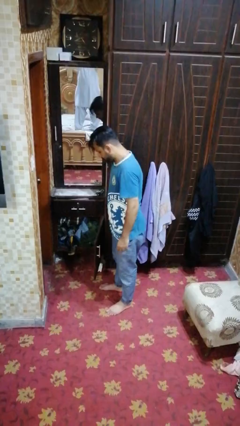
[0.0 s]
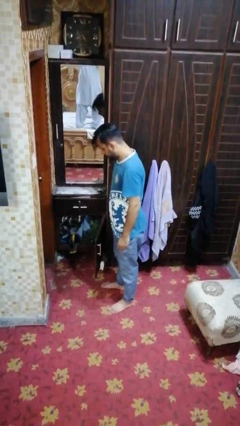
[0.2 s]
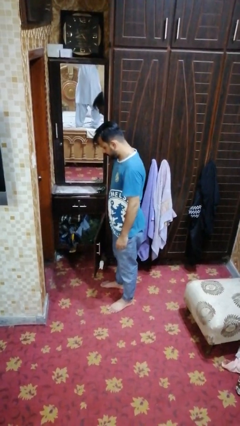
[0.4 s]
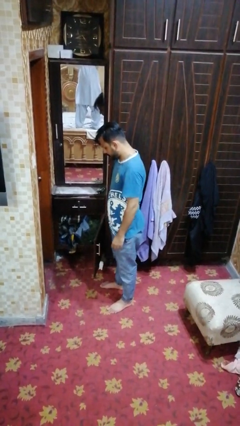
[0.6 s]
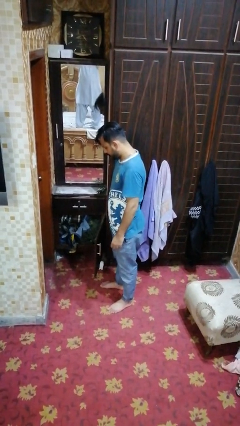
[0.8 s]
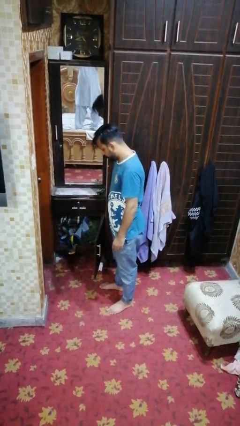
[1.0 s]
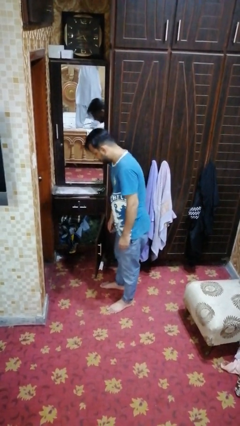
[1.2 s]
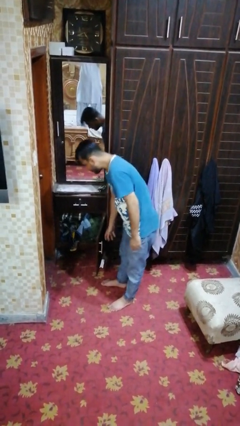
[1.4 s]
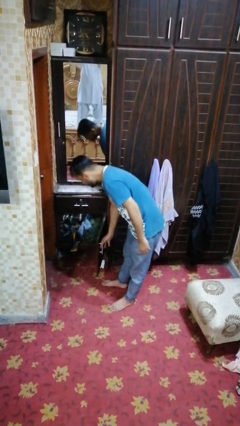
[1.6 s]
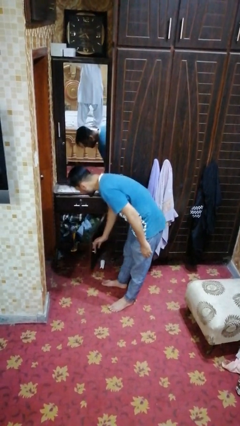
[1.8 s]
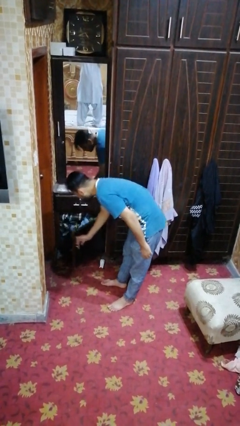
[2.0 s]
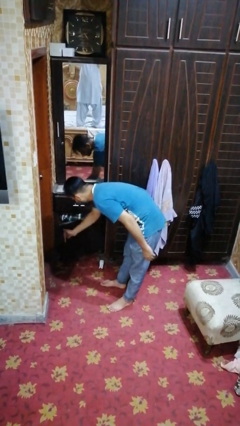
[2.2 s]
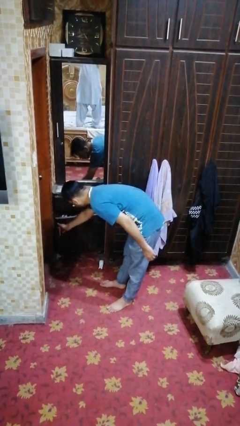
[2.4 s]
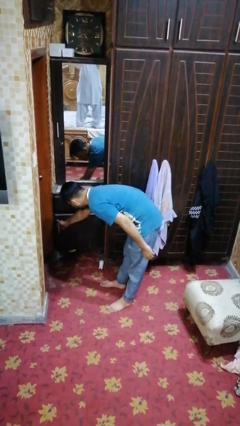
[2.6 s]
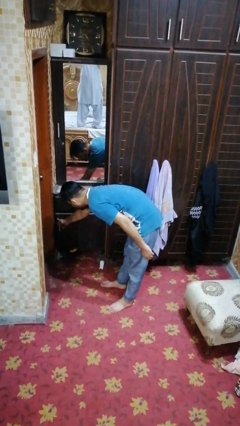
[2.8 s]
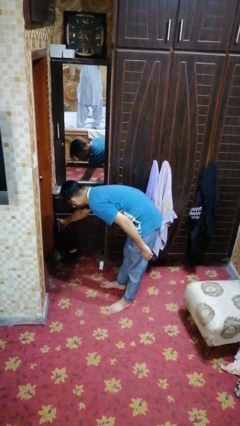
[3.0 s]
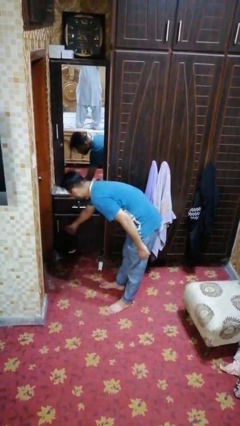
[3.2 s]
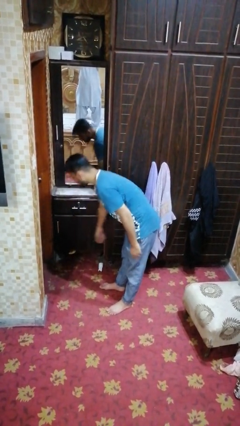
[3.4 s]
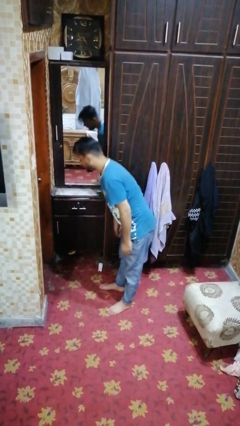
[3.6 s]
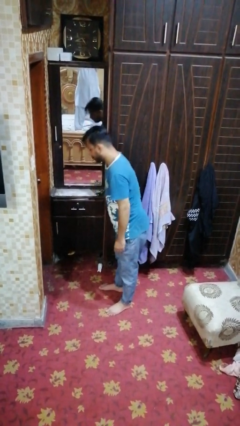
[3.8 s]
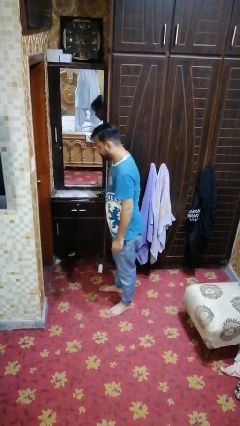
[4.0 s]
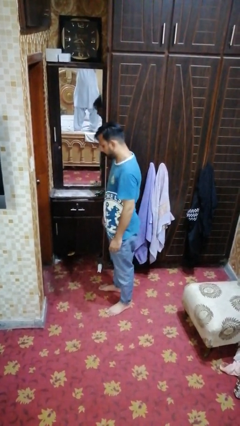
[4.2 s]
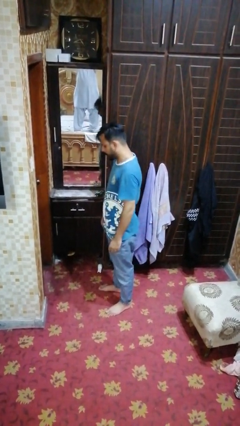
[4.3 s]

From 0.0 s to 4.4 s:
person closes dresser drawer

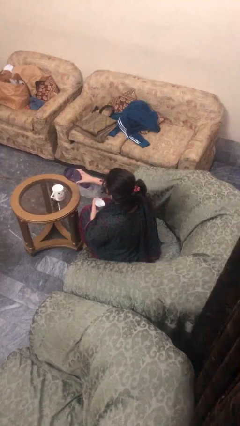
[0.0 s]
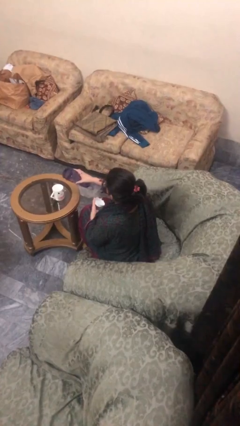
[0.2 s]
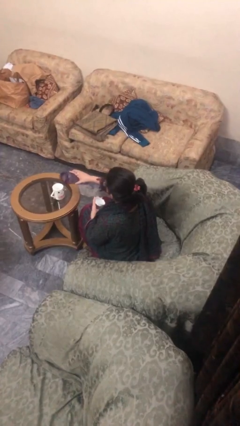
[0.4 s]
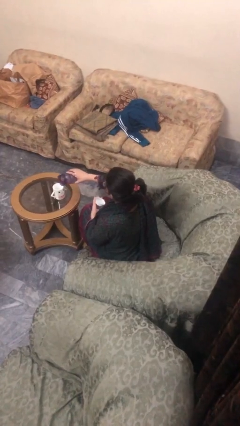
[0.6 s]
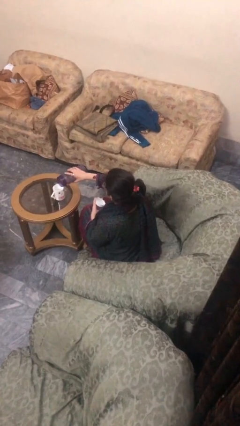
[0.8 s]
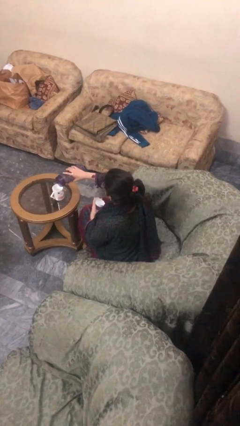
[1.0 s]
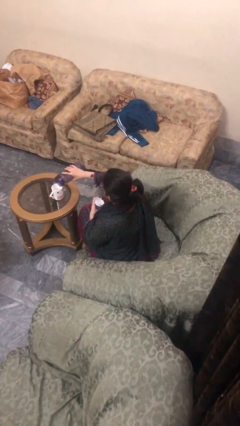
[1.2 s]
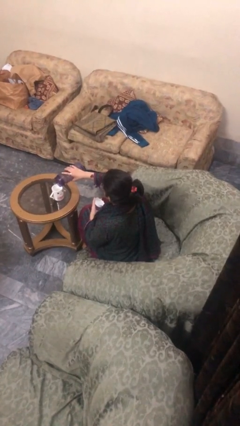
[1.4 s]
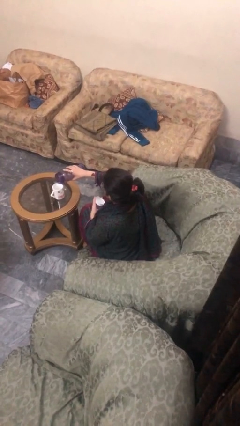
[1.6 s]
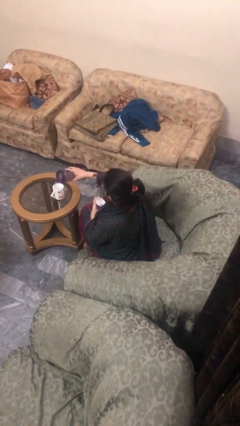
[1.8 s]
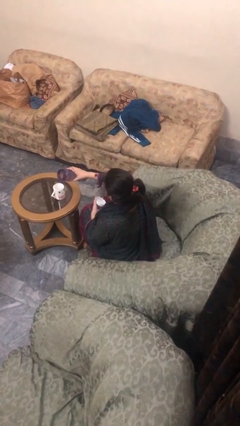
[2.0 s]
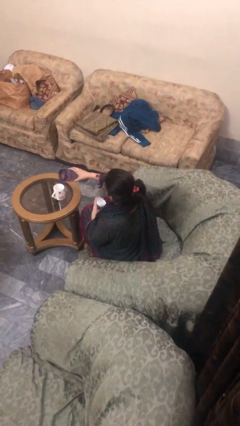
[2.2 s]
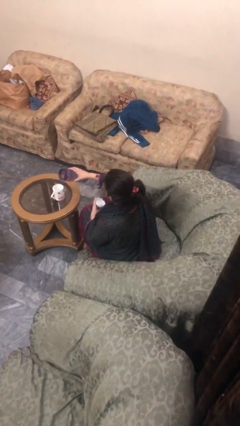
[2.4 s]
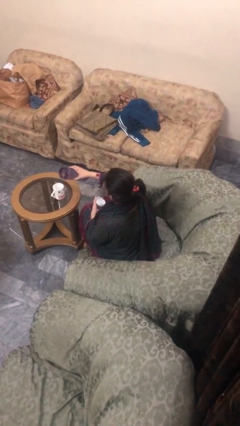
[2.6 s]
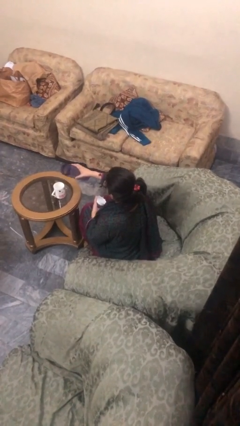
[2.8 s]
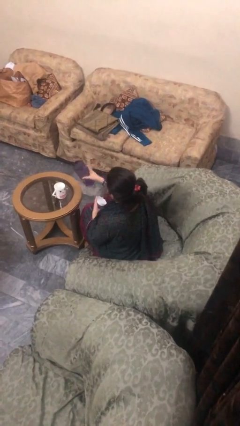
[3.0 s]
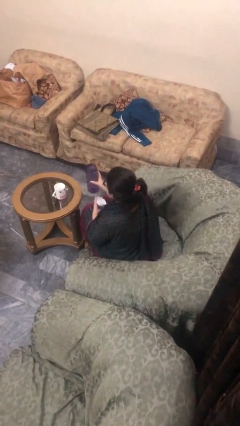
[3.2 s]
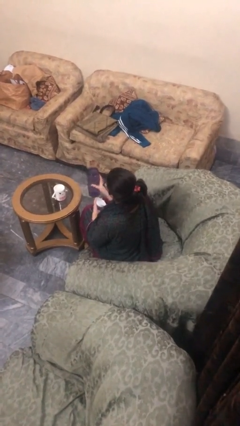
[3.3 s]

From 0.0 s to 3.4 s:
person pours liquid into cup

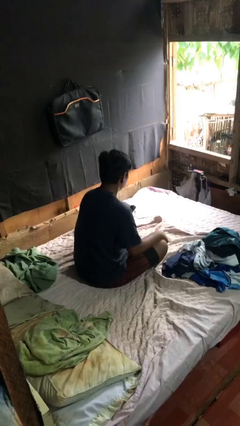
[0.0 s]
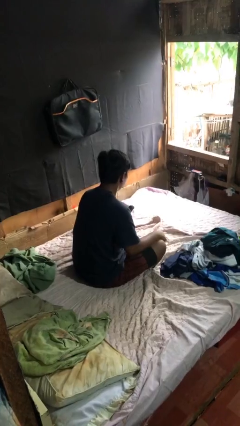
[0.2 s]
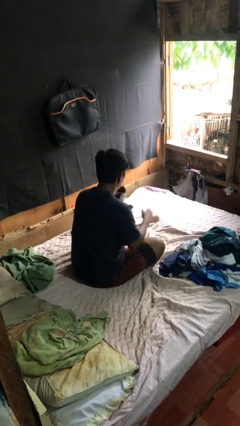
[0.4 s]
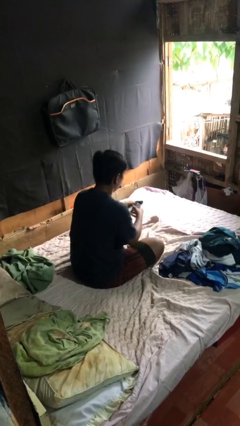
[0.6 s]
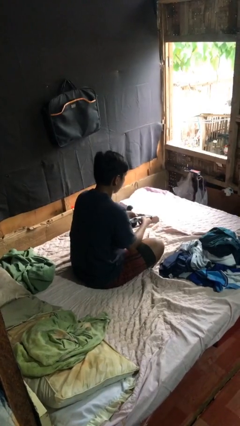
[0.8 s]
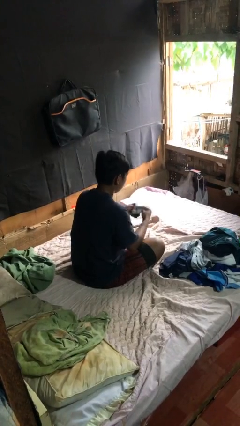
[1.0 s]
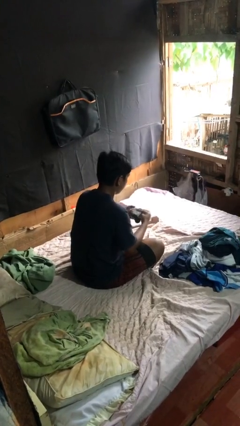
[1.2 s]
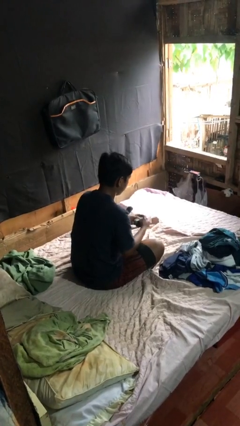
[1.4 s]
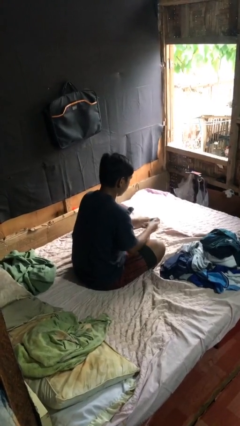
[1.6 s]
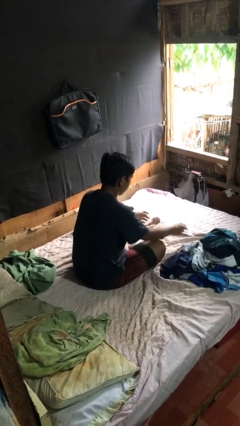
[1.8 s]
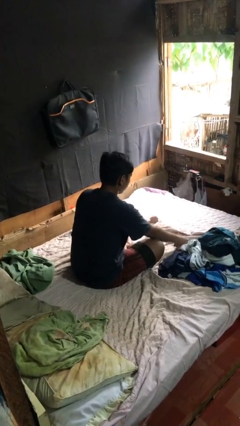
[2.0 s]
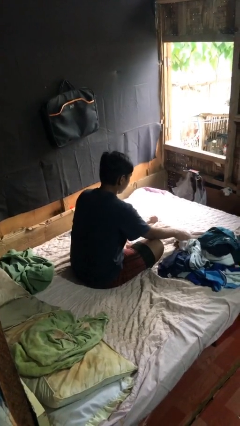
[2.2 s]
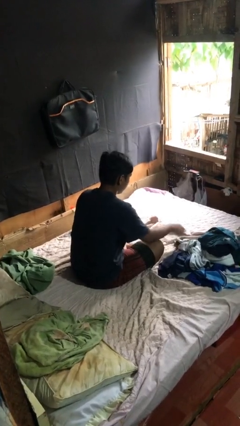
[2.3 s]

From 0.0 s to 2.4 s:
person folds socks

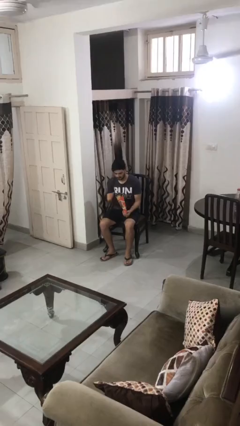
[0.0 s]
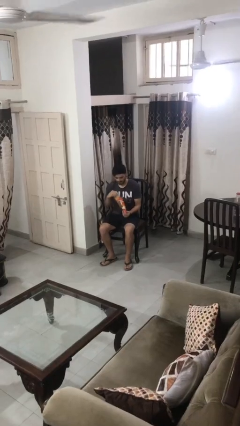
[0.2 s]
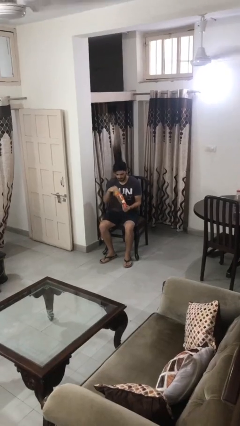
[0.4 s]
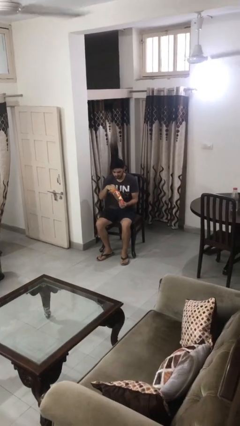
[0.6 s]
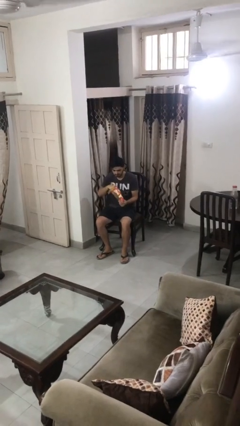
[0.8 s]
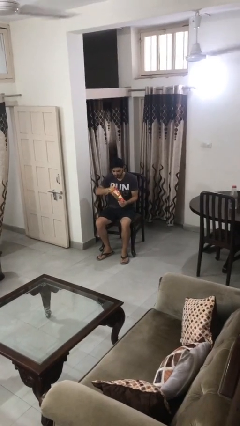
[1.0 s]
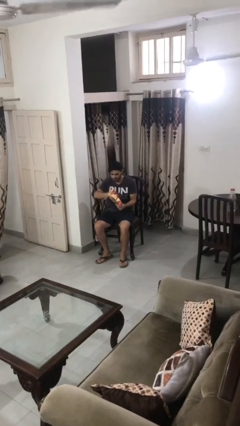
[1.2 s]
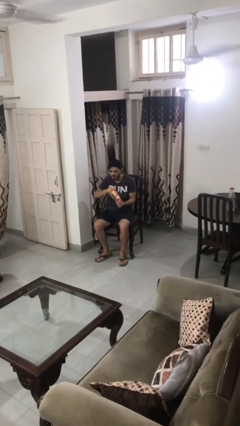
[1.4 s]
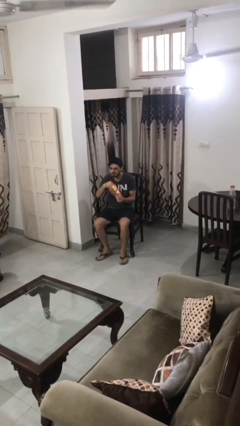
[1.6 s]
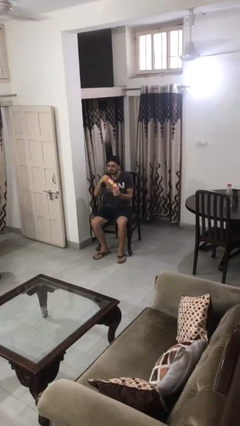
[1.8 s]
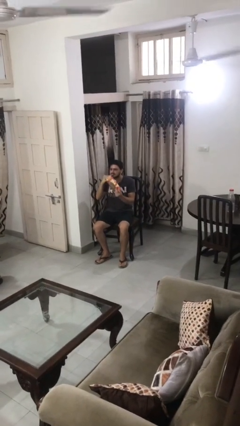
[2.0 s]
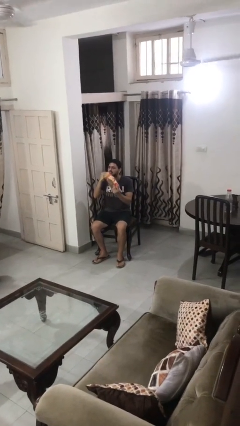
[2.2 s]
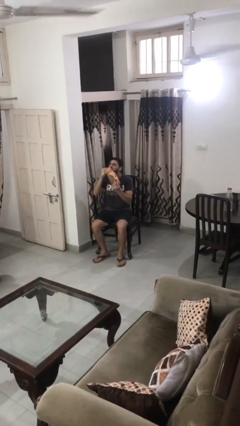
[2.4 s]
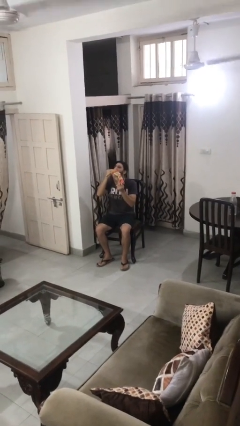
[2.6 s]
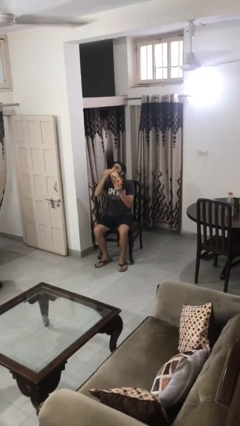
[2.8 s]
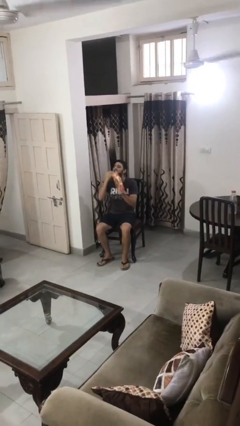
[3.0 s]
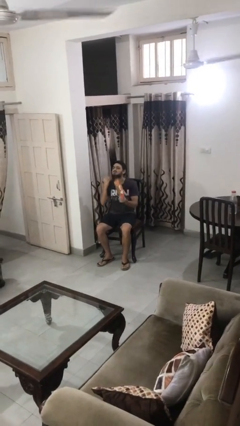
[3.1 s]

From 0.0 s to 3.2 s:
person eats snack from bag

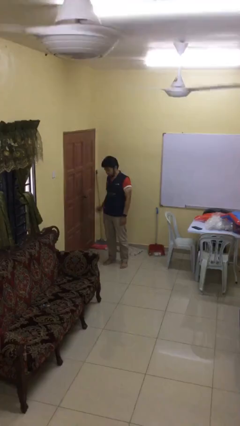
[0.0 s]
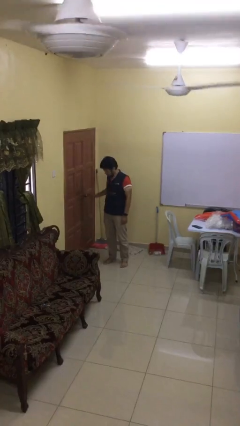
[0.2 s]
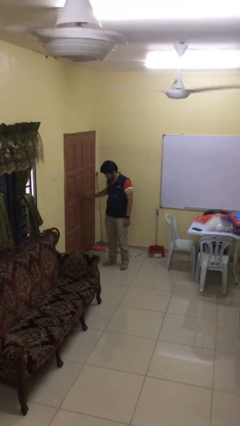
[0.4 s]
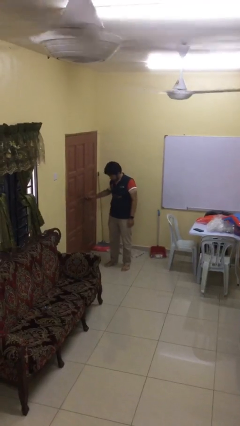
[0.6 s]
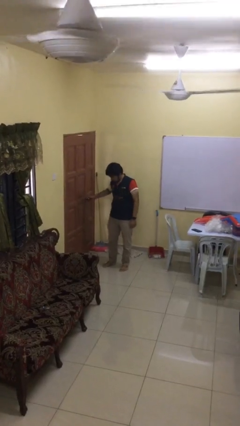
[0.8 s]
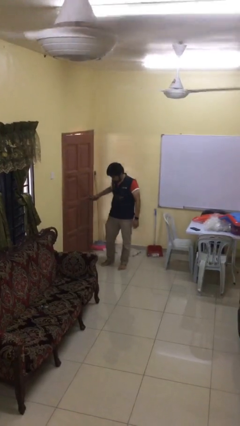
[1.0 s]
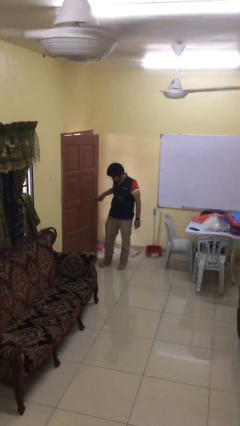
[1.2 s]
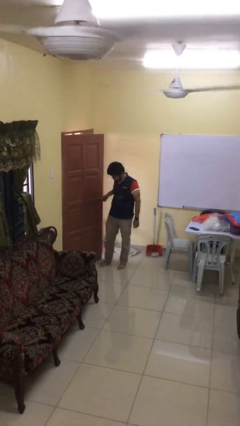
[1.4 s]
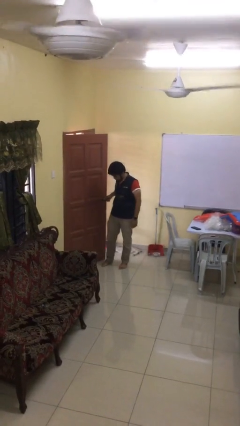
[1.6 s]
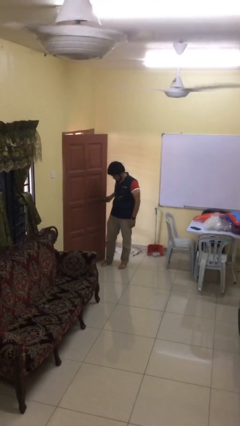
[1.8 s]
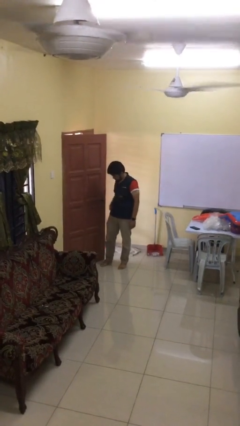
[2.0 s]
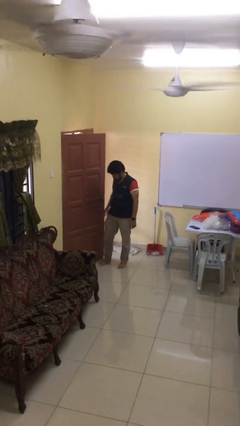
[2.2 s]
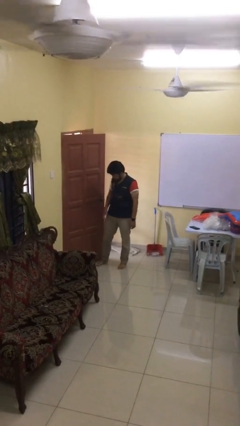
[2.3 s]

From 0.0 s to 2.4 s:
person opens facility door

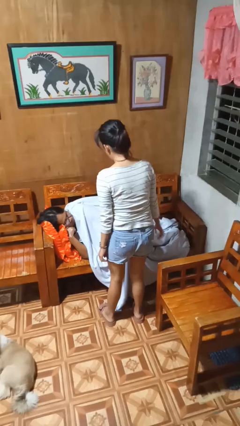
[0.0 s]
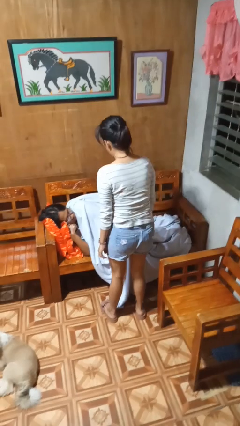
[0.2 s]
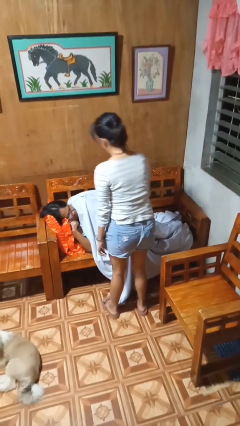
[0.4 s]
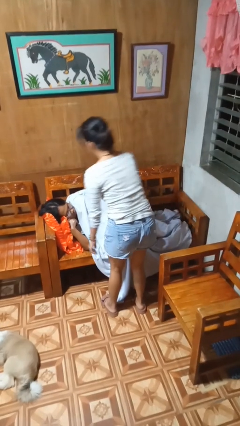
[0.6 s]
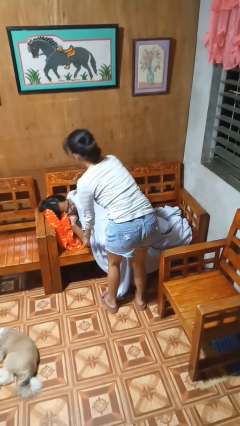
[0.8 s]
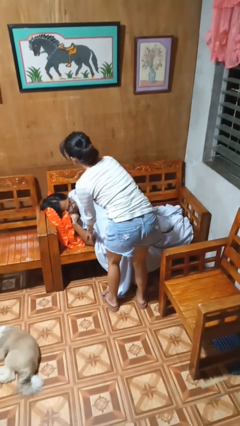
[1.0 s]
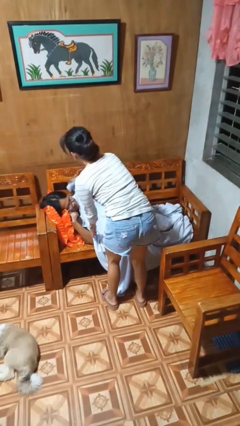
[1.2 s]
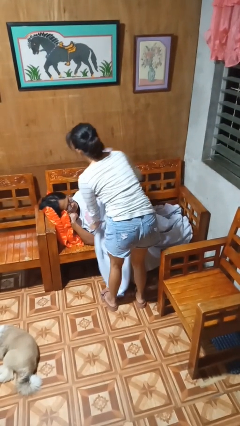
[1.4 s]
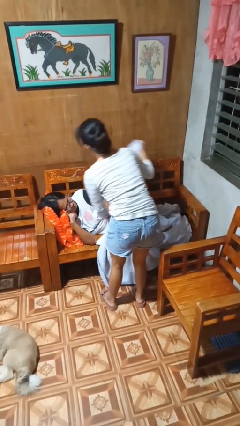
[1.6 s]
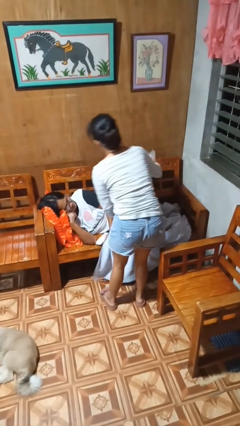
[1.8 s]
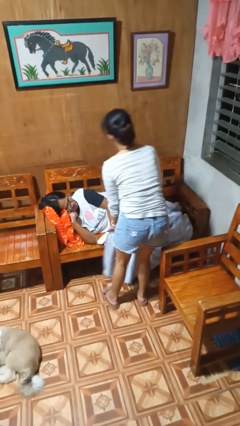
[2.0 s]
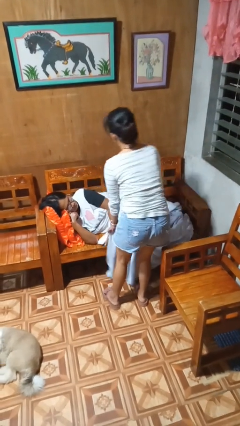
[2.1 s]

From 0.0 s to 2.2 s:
person uncovers friend with blanket
